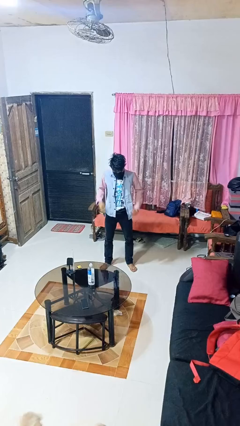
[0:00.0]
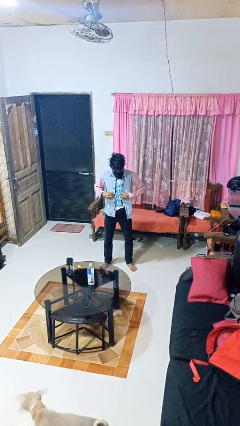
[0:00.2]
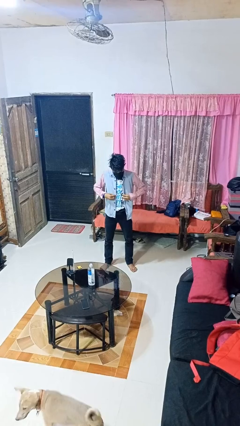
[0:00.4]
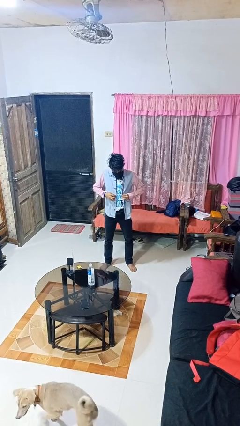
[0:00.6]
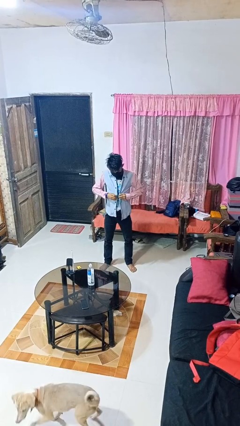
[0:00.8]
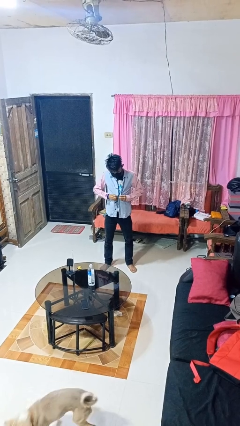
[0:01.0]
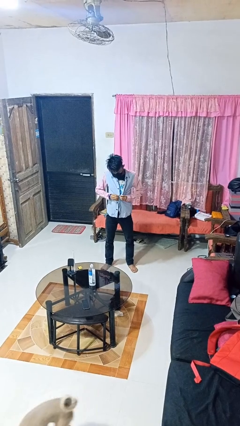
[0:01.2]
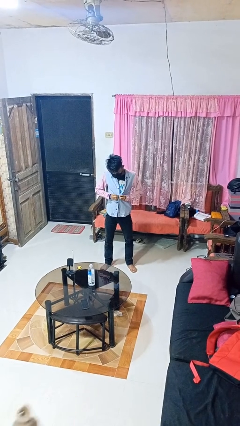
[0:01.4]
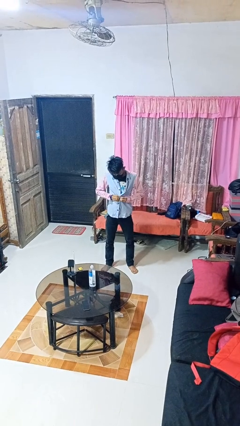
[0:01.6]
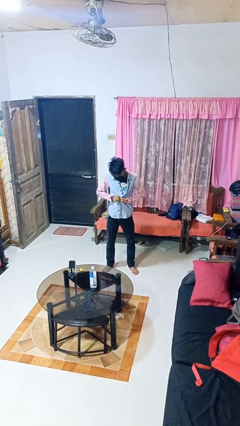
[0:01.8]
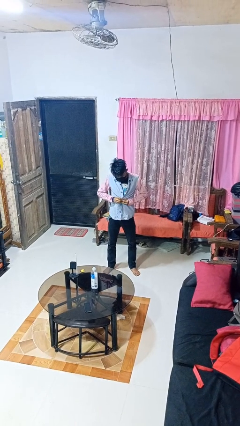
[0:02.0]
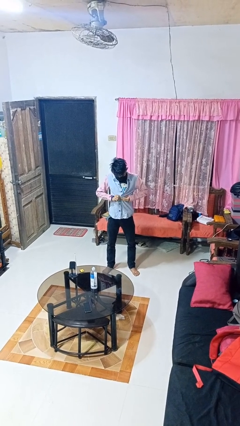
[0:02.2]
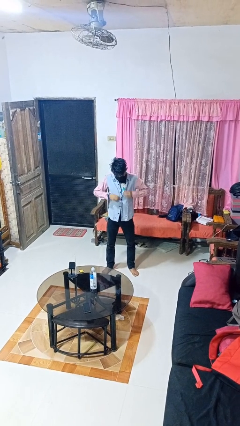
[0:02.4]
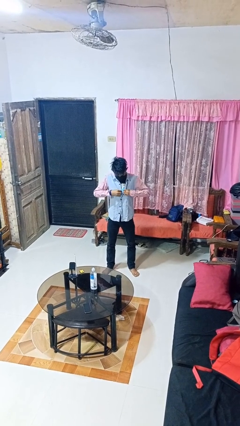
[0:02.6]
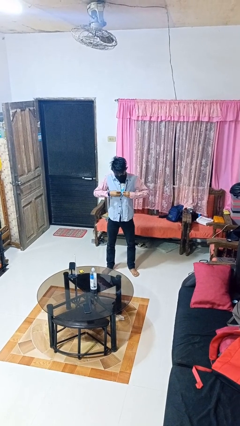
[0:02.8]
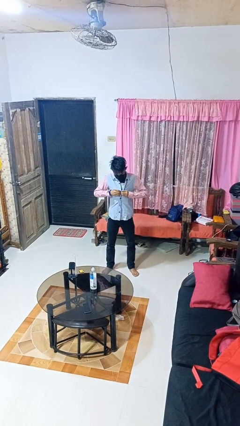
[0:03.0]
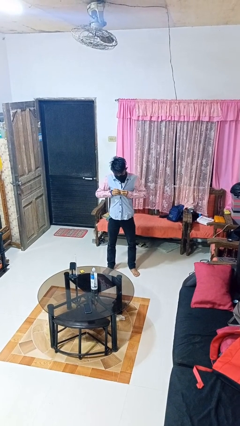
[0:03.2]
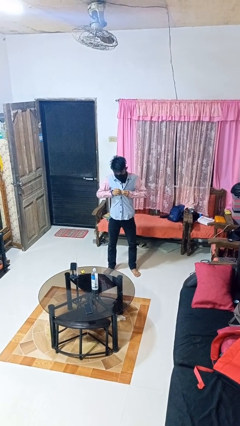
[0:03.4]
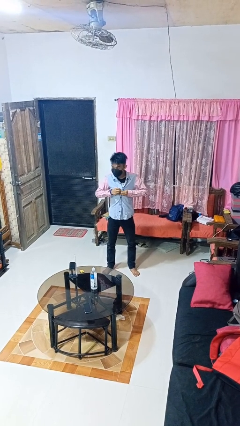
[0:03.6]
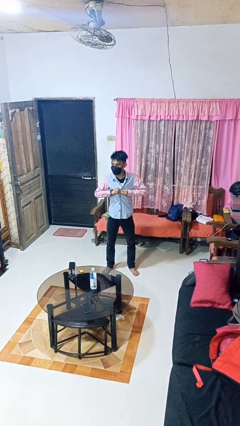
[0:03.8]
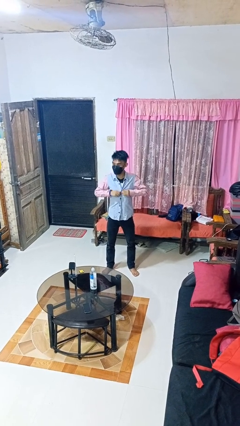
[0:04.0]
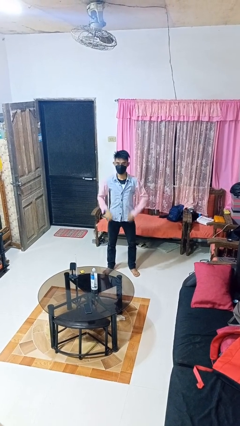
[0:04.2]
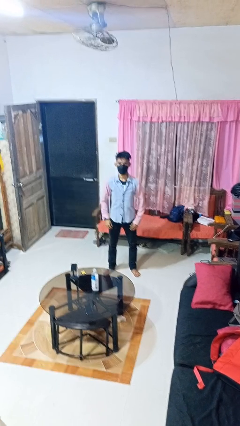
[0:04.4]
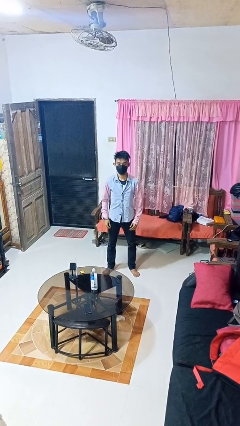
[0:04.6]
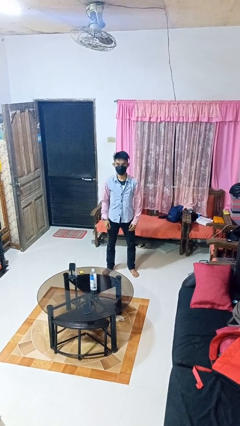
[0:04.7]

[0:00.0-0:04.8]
person buttons shirt

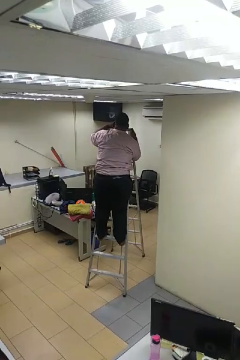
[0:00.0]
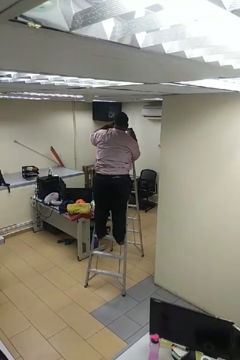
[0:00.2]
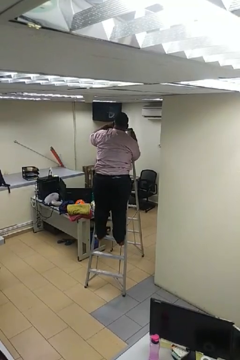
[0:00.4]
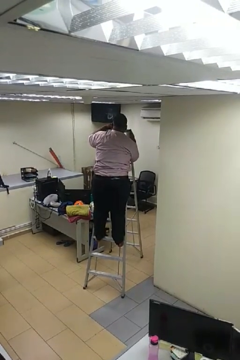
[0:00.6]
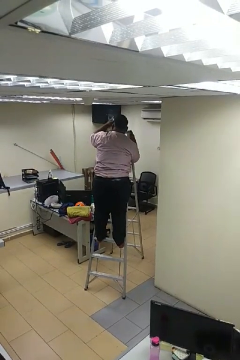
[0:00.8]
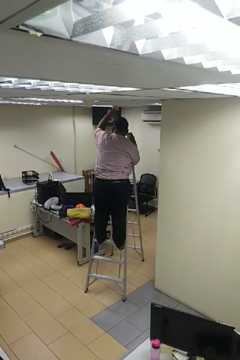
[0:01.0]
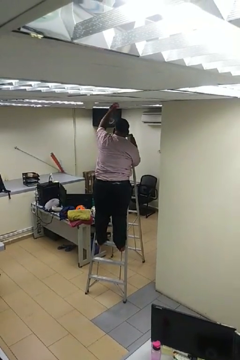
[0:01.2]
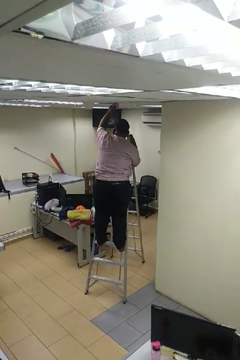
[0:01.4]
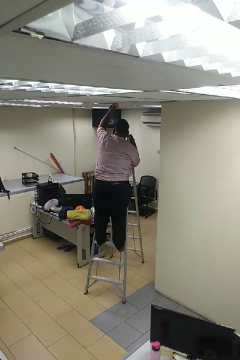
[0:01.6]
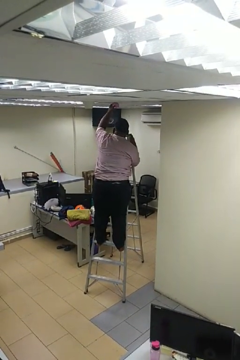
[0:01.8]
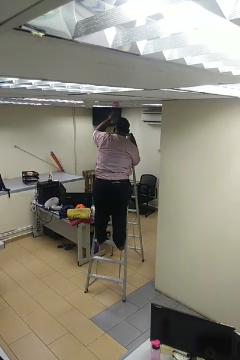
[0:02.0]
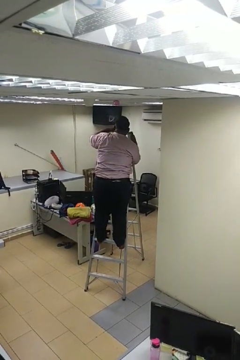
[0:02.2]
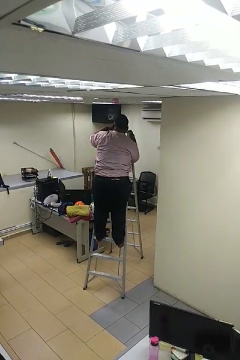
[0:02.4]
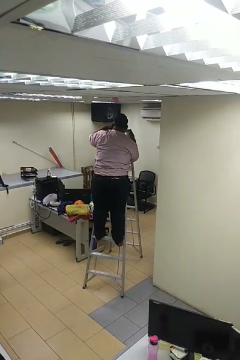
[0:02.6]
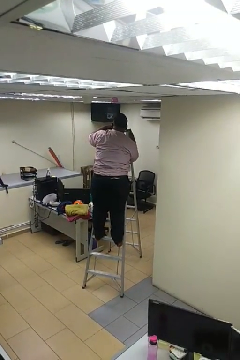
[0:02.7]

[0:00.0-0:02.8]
person puts up smoke detector

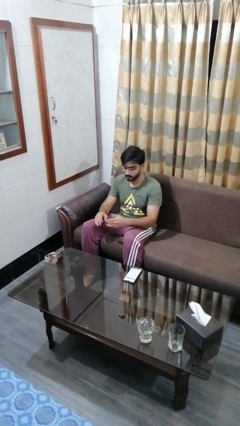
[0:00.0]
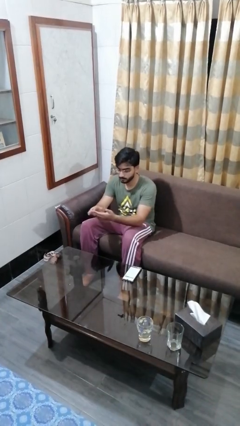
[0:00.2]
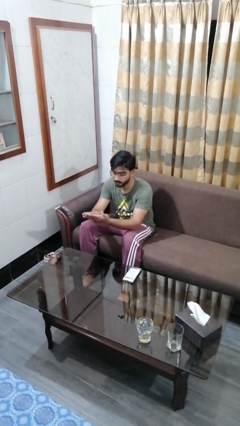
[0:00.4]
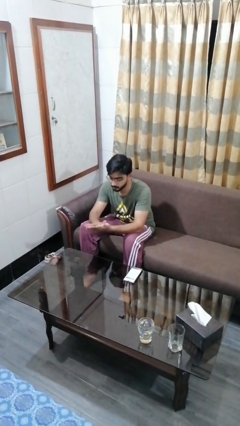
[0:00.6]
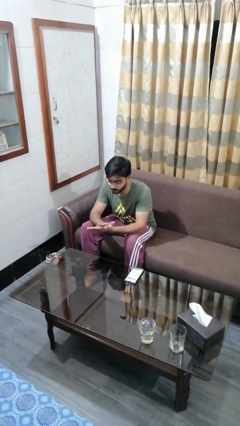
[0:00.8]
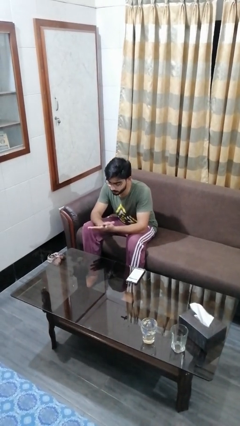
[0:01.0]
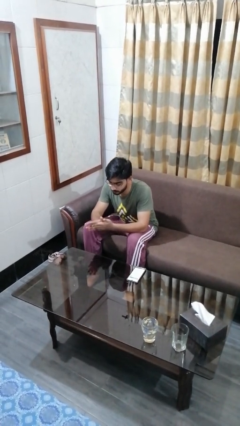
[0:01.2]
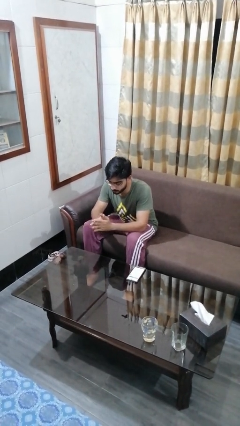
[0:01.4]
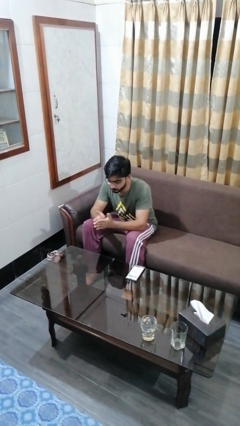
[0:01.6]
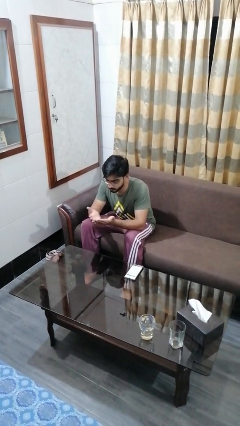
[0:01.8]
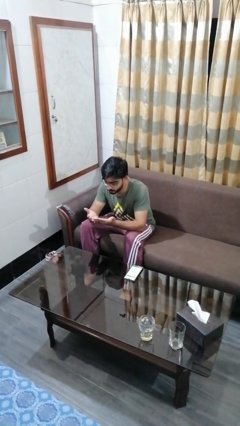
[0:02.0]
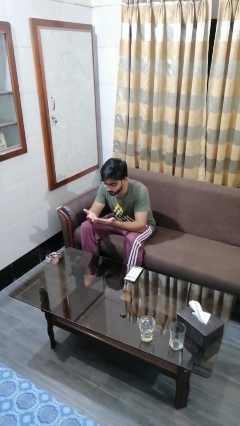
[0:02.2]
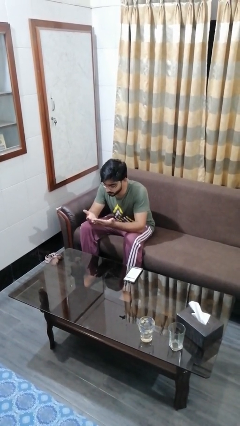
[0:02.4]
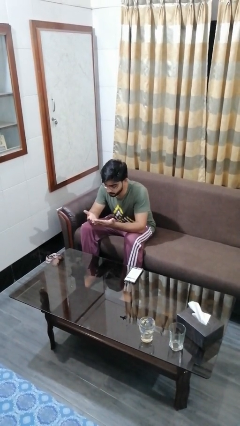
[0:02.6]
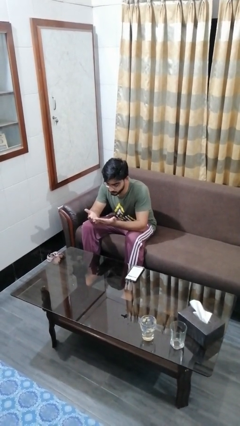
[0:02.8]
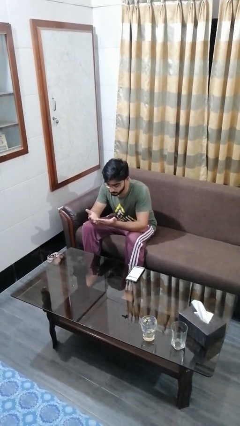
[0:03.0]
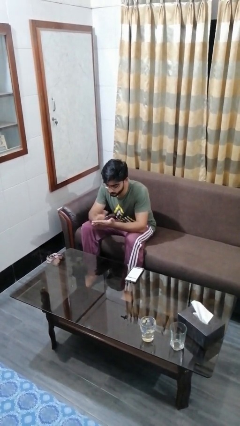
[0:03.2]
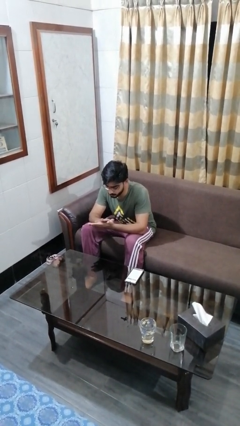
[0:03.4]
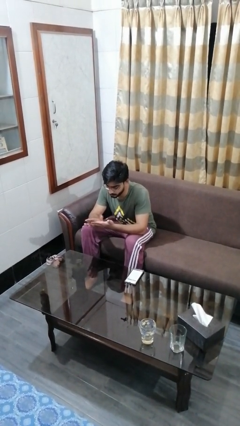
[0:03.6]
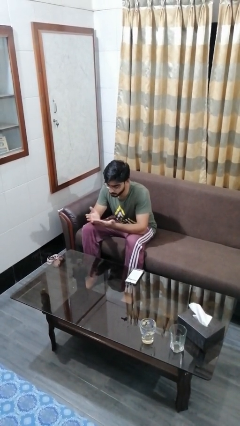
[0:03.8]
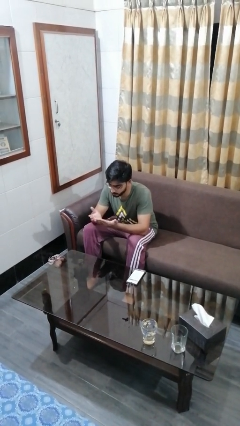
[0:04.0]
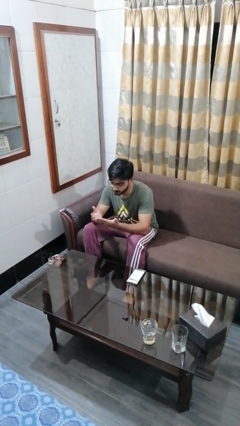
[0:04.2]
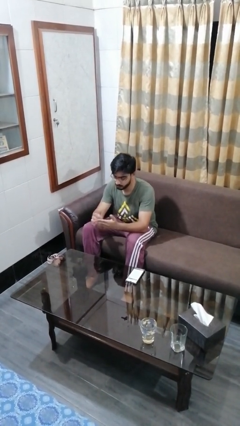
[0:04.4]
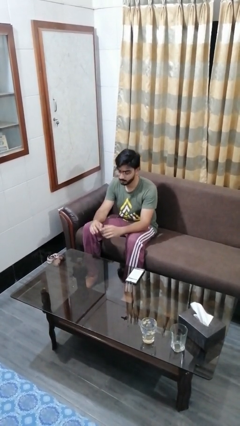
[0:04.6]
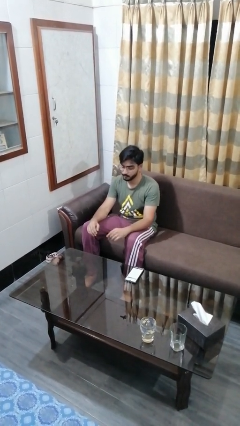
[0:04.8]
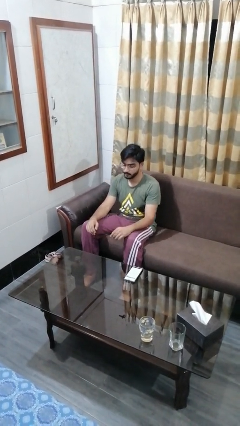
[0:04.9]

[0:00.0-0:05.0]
person looks at hands in lap

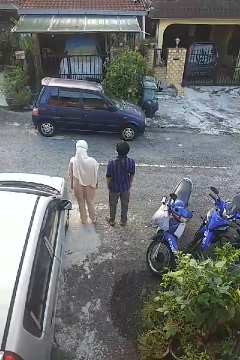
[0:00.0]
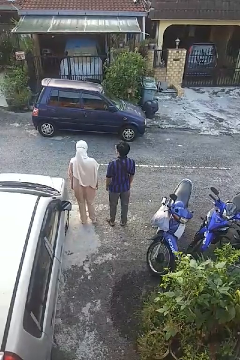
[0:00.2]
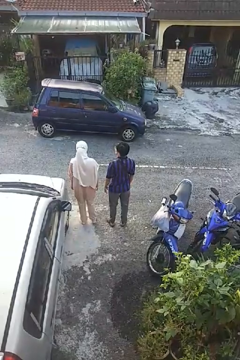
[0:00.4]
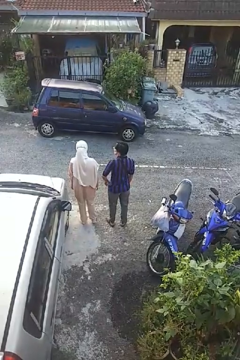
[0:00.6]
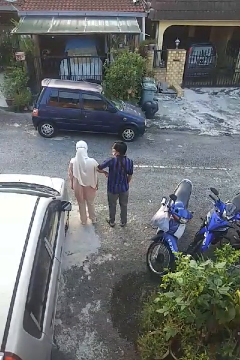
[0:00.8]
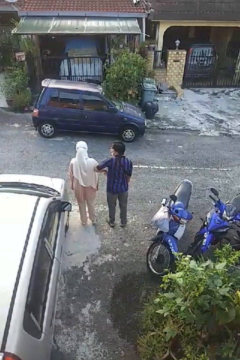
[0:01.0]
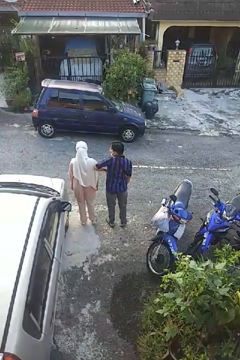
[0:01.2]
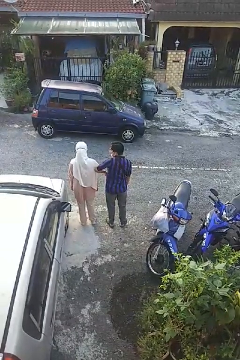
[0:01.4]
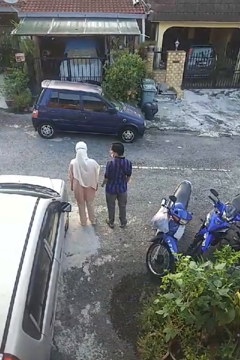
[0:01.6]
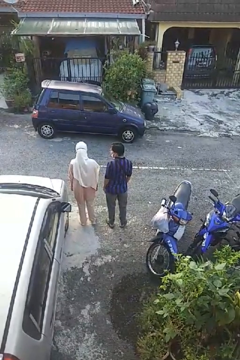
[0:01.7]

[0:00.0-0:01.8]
person nudges person with elbow

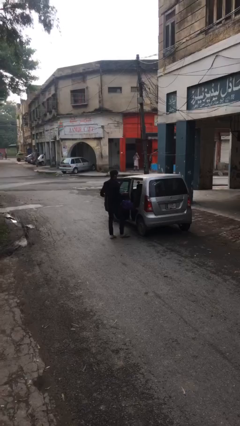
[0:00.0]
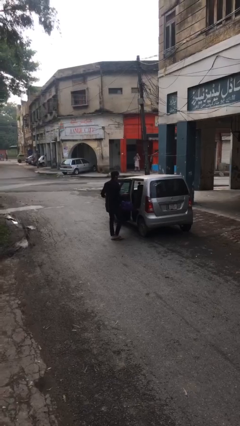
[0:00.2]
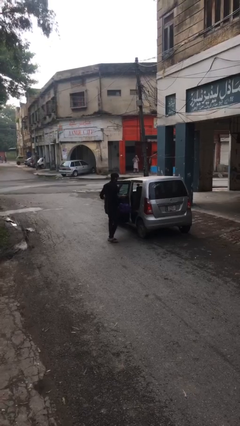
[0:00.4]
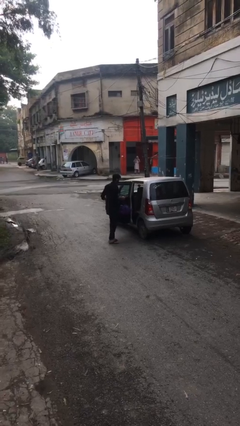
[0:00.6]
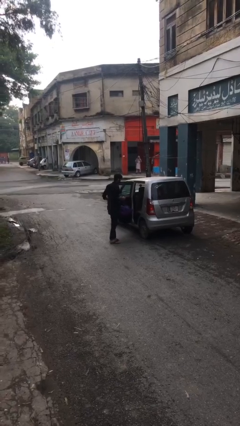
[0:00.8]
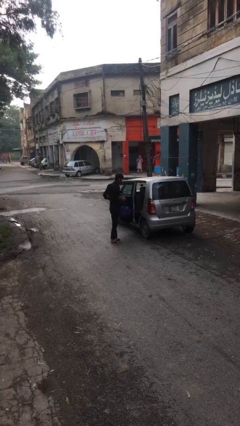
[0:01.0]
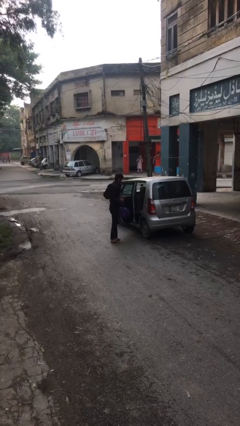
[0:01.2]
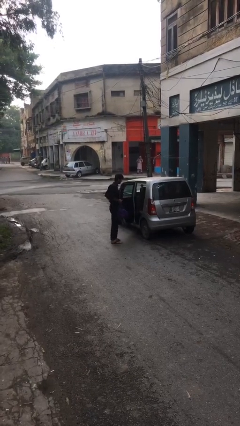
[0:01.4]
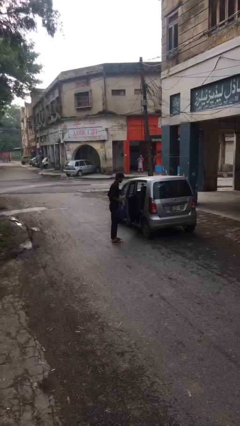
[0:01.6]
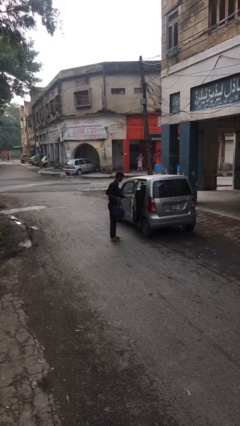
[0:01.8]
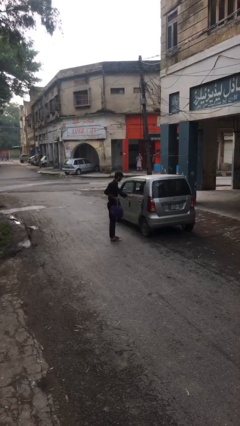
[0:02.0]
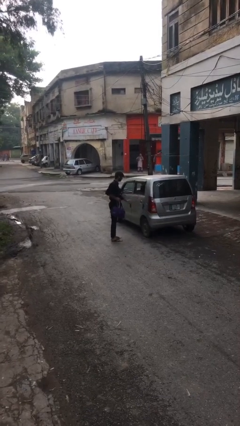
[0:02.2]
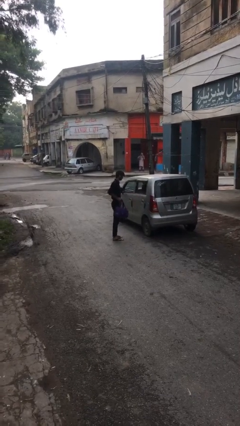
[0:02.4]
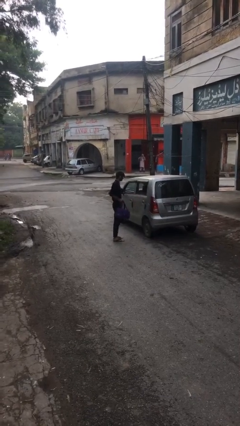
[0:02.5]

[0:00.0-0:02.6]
person closes car door

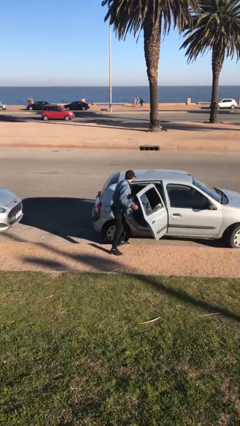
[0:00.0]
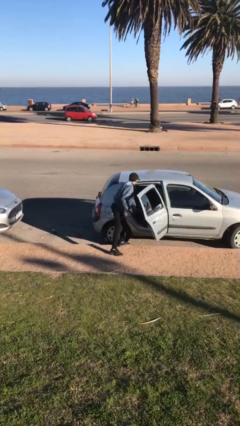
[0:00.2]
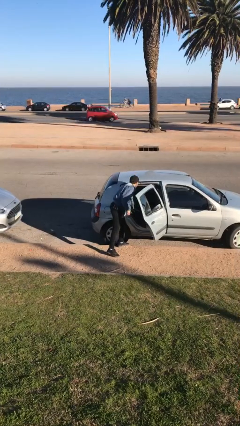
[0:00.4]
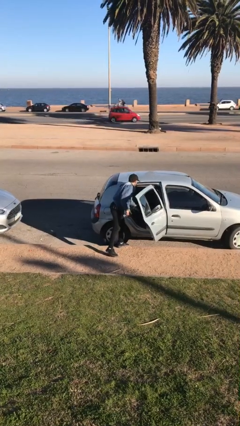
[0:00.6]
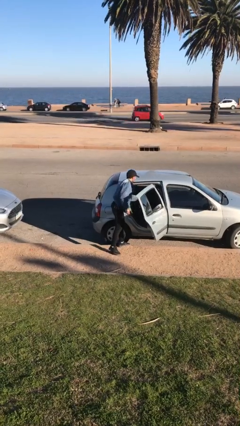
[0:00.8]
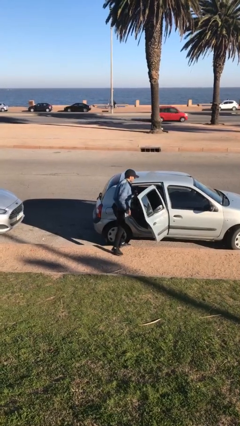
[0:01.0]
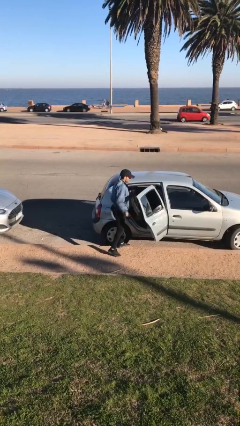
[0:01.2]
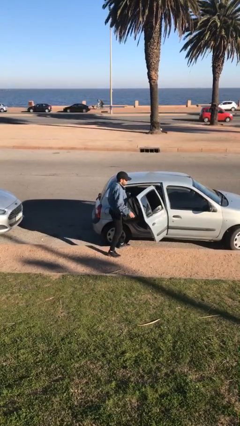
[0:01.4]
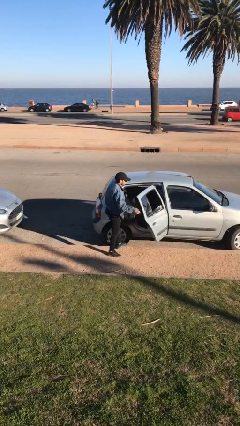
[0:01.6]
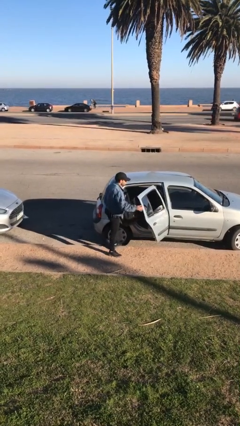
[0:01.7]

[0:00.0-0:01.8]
person unloads car
